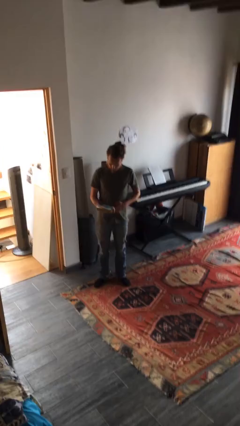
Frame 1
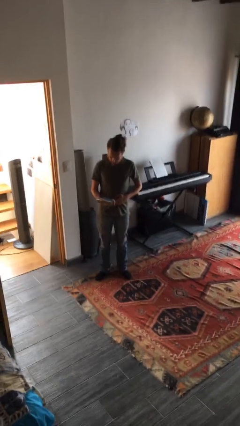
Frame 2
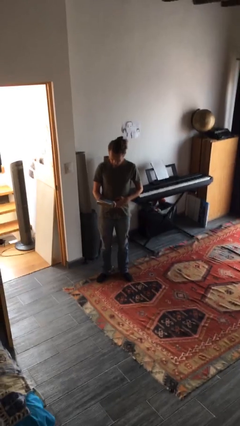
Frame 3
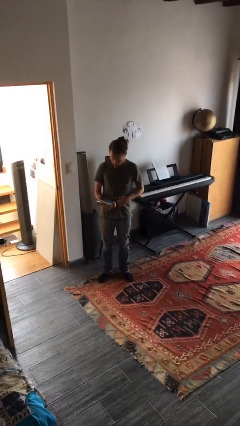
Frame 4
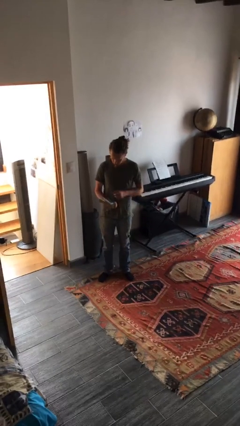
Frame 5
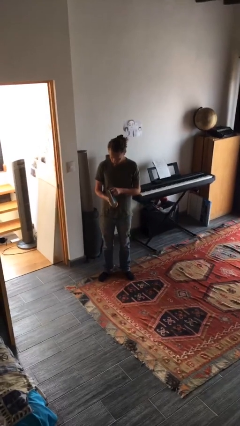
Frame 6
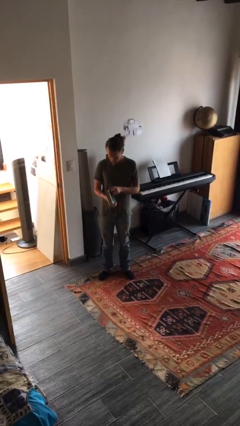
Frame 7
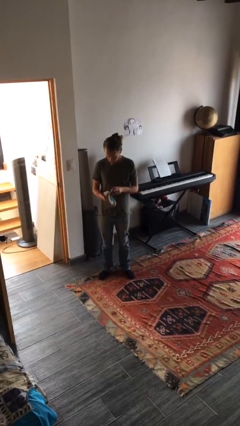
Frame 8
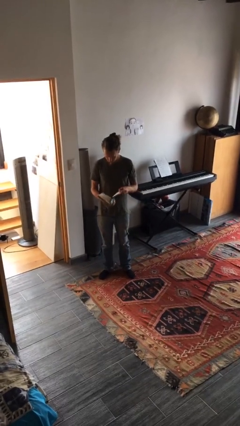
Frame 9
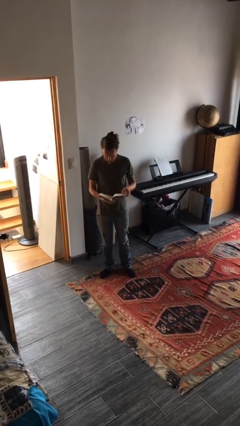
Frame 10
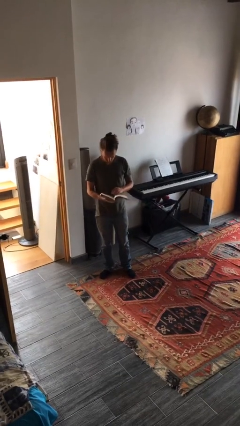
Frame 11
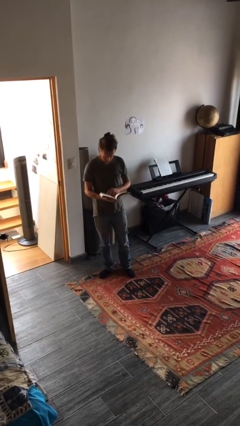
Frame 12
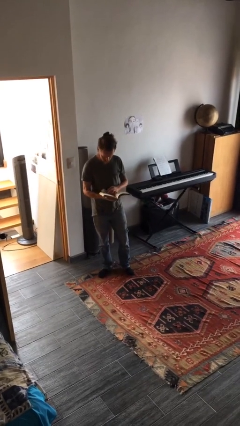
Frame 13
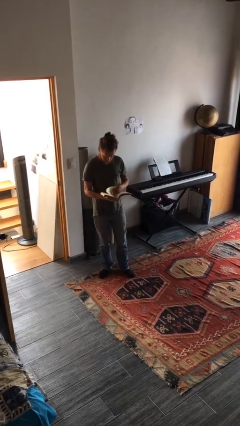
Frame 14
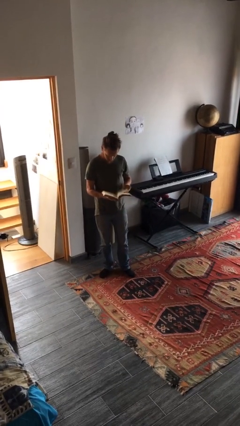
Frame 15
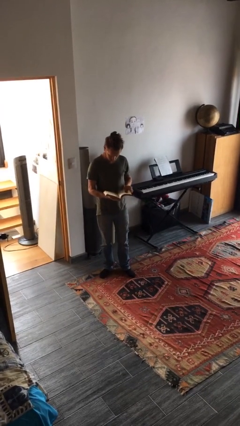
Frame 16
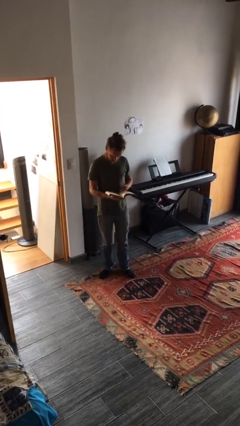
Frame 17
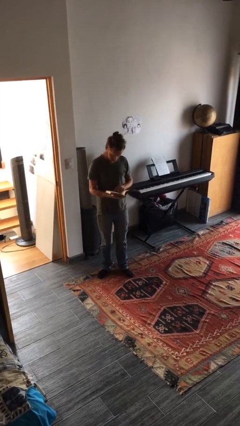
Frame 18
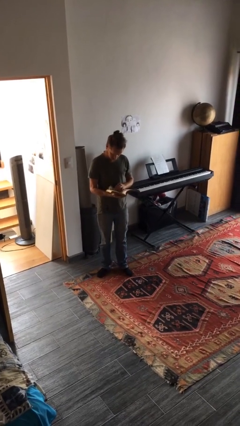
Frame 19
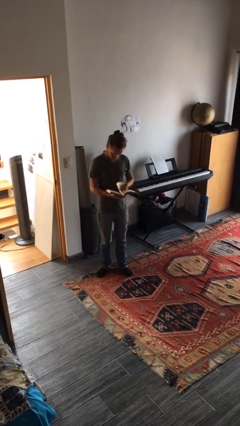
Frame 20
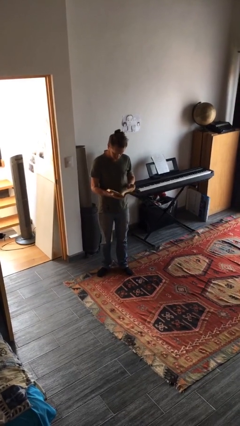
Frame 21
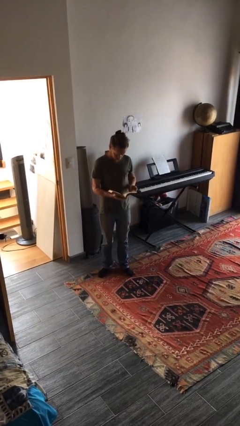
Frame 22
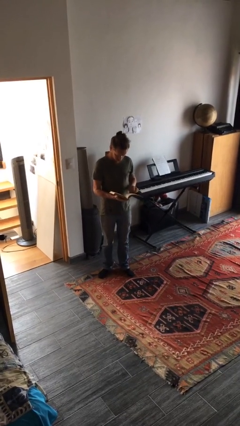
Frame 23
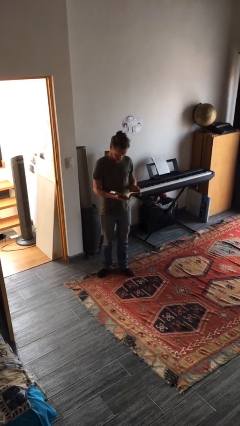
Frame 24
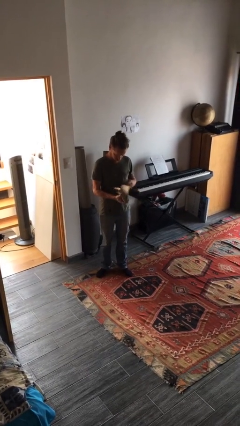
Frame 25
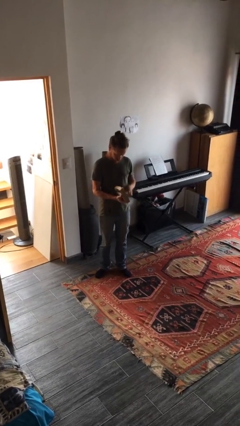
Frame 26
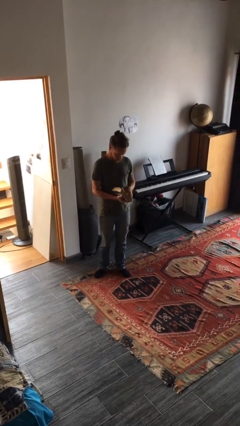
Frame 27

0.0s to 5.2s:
person reads book

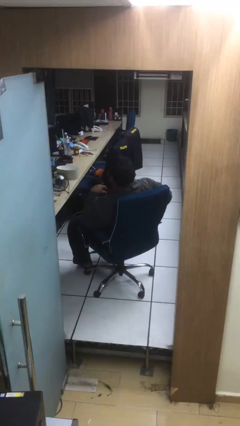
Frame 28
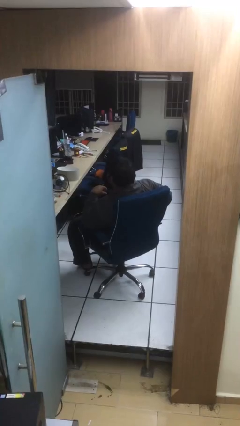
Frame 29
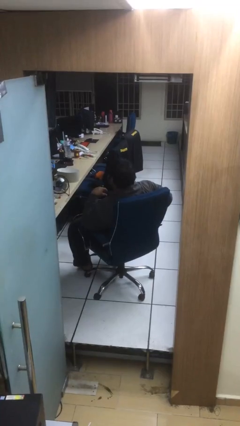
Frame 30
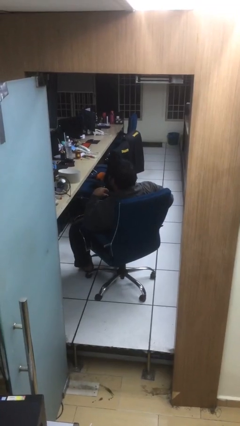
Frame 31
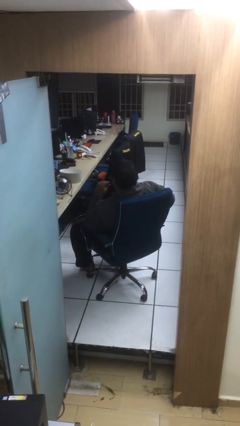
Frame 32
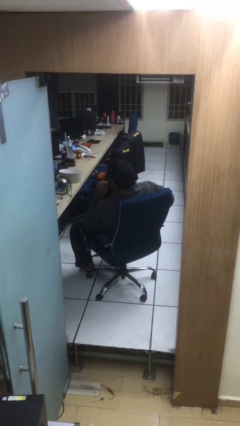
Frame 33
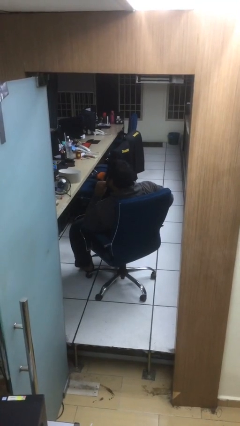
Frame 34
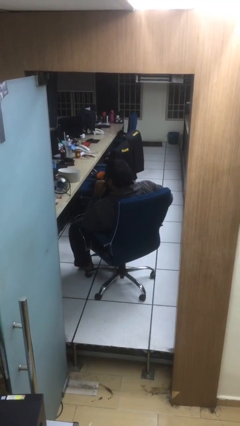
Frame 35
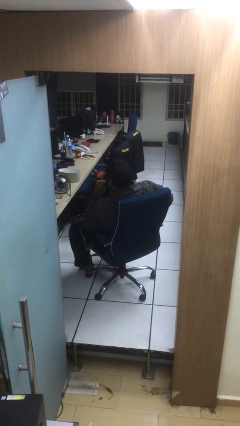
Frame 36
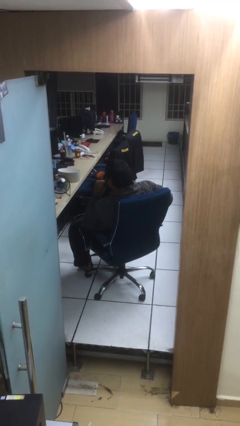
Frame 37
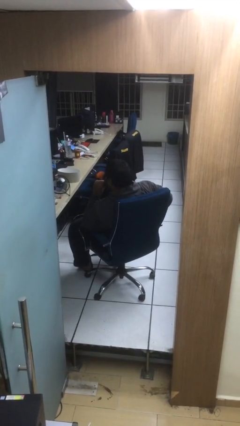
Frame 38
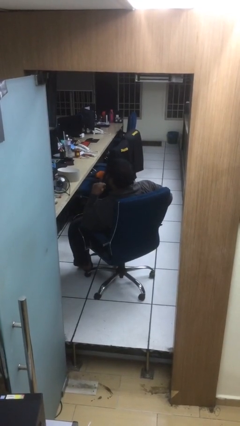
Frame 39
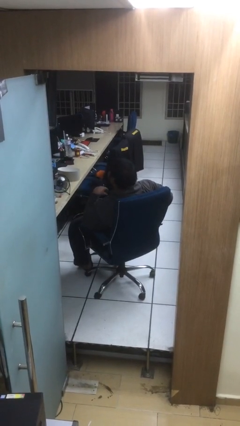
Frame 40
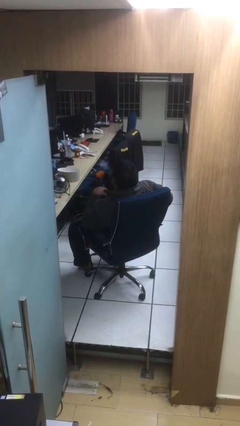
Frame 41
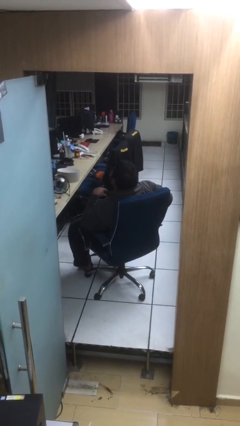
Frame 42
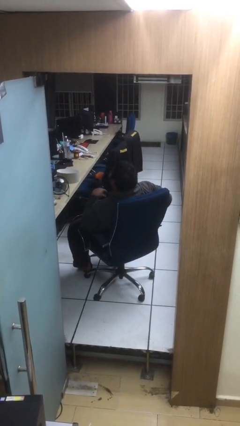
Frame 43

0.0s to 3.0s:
person vapes

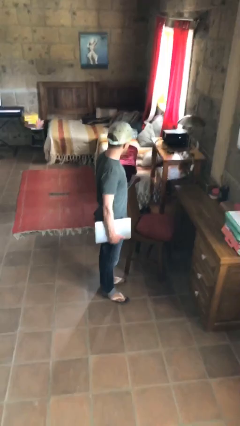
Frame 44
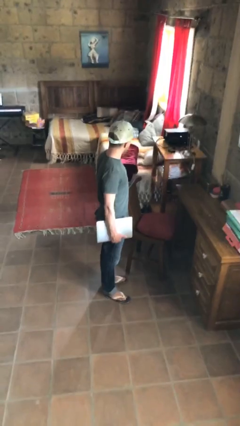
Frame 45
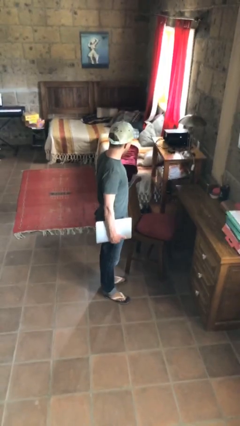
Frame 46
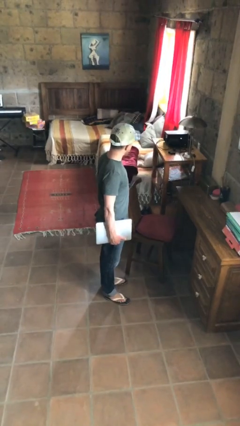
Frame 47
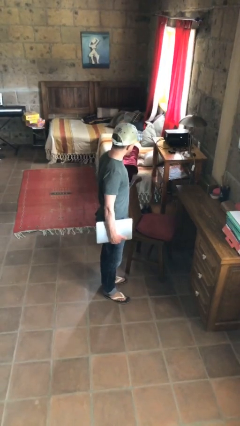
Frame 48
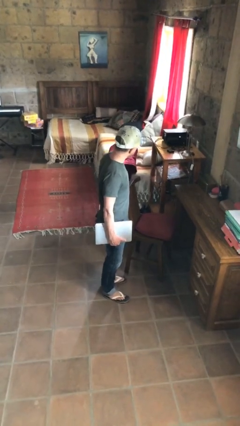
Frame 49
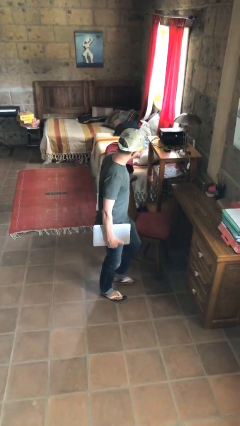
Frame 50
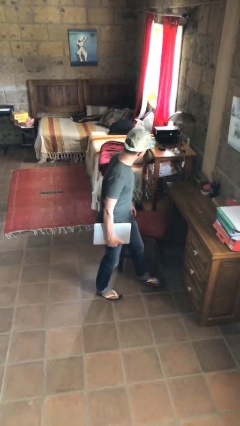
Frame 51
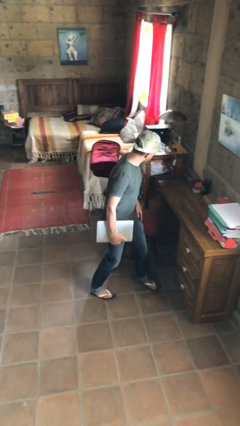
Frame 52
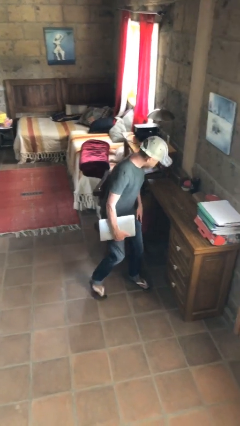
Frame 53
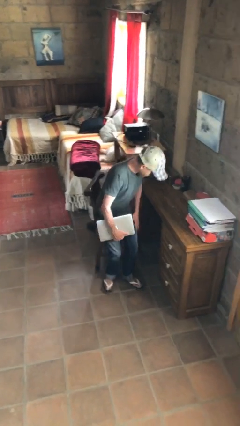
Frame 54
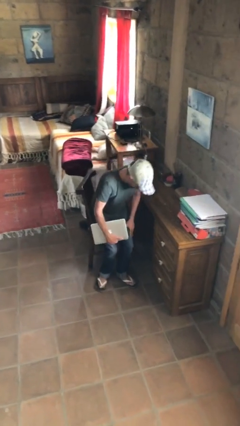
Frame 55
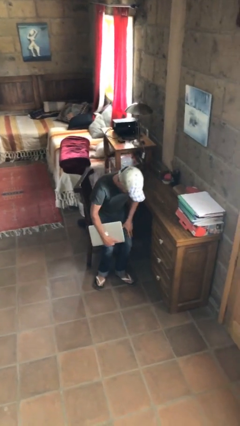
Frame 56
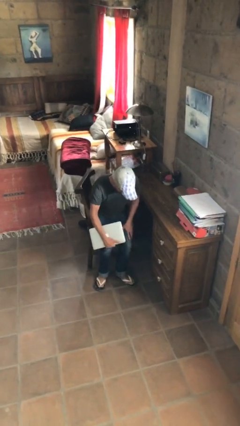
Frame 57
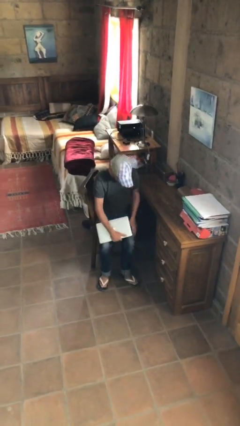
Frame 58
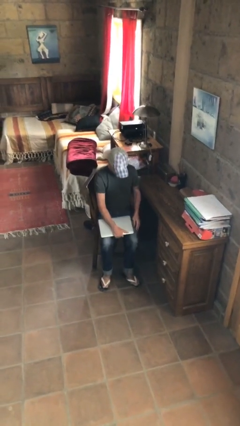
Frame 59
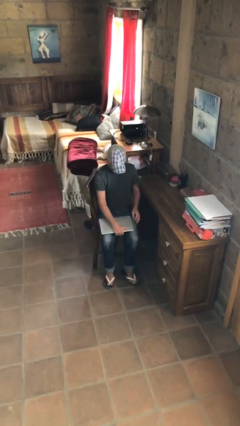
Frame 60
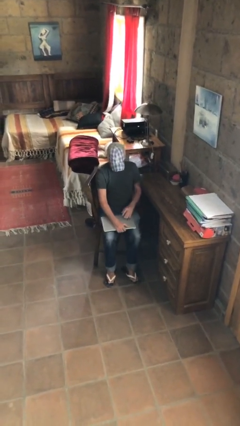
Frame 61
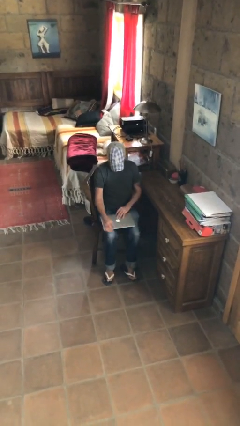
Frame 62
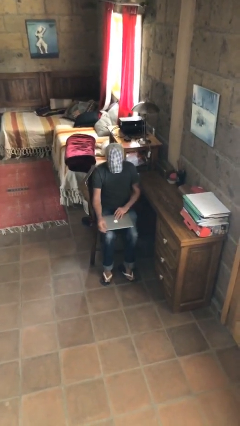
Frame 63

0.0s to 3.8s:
person sits down

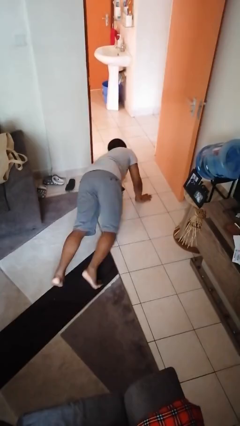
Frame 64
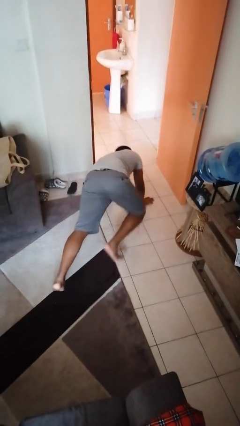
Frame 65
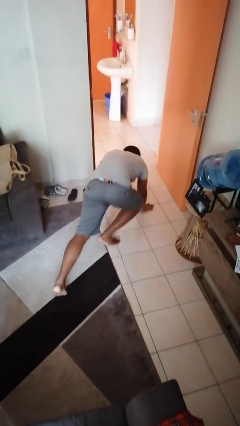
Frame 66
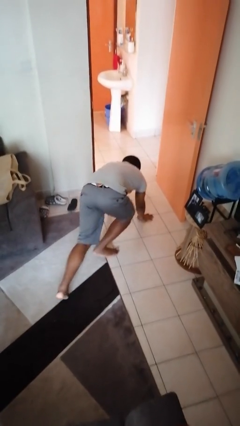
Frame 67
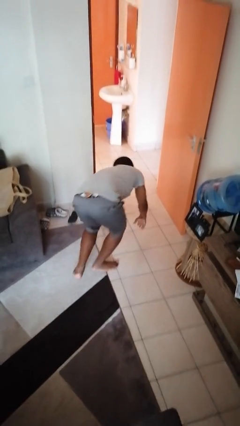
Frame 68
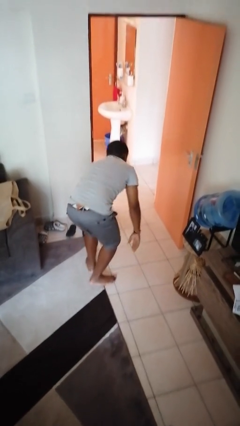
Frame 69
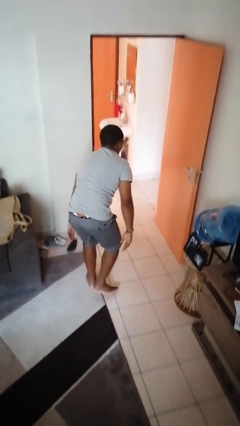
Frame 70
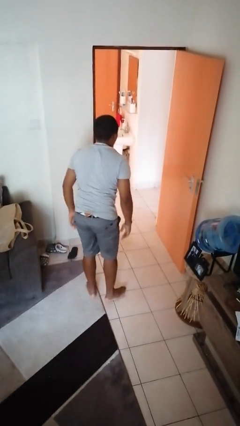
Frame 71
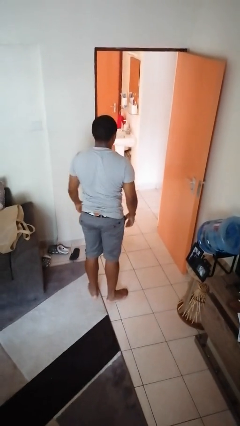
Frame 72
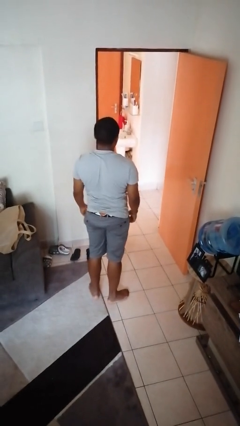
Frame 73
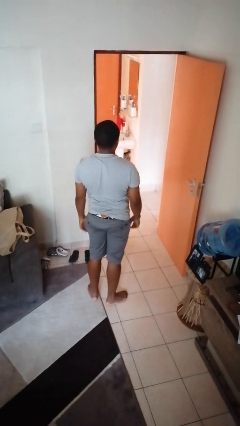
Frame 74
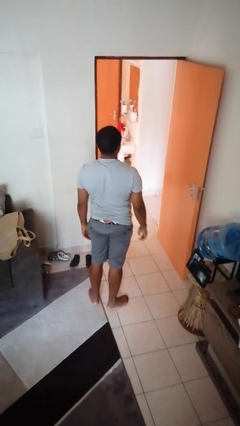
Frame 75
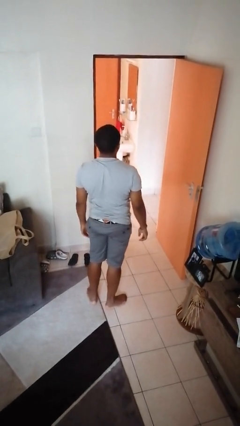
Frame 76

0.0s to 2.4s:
person stands up from floor

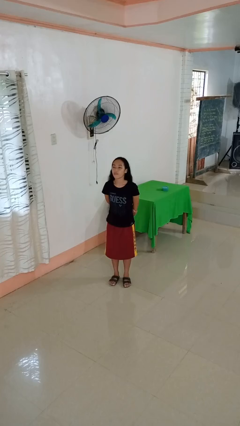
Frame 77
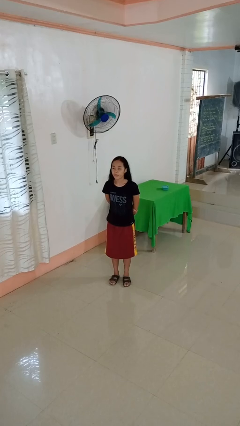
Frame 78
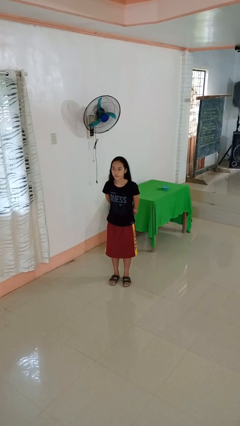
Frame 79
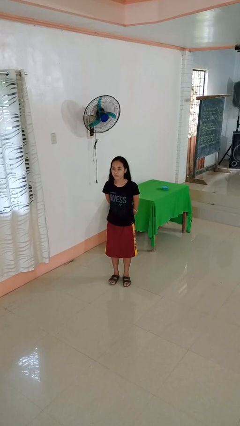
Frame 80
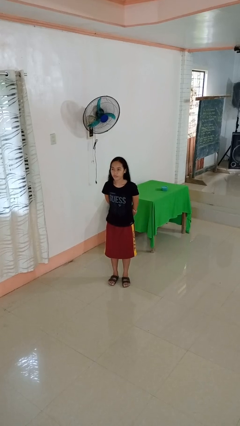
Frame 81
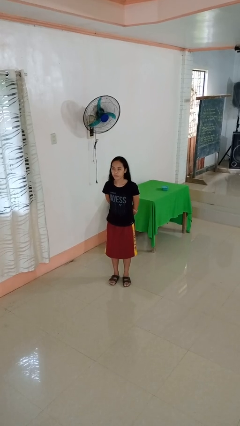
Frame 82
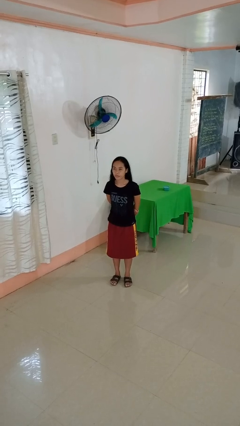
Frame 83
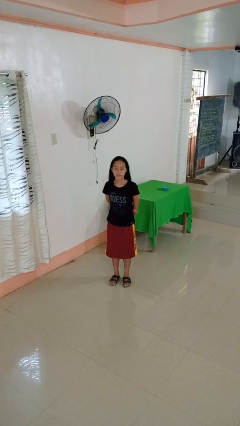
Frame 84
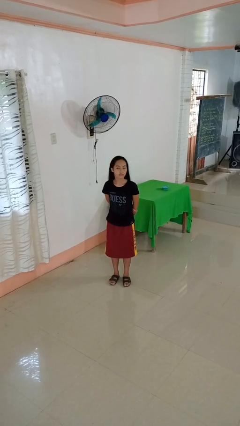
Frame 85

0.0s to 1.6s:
person nods head

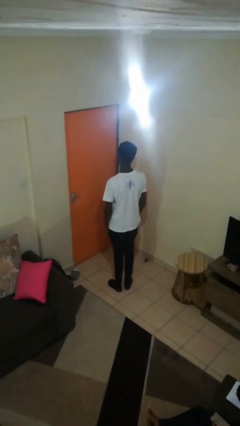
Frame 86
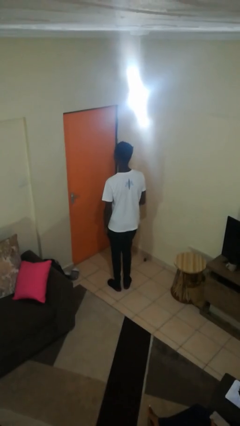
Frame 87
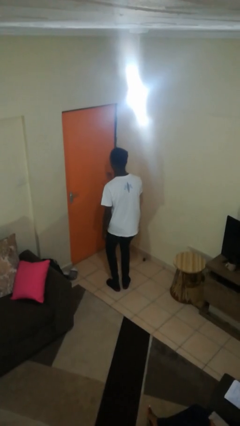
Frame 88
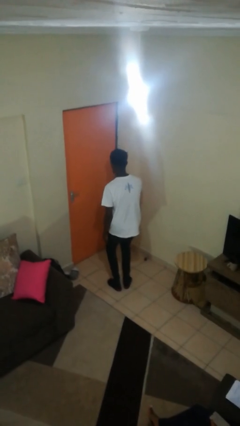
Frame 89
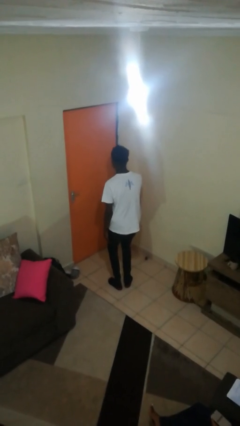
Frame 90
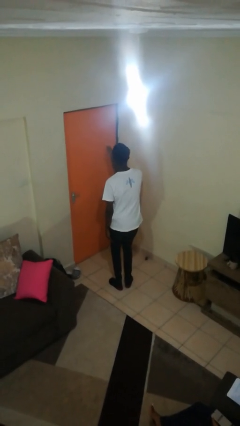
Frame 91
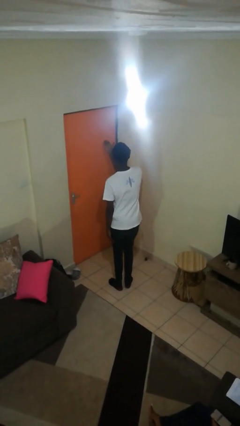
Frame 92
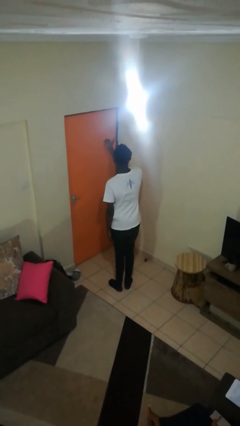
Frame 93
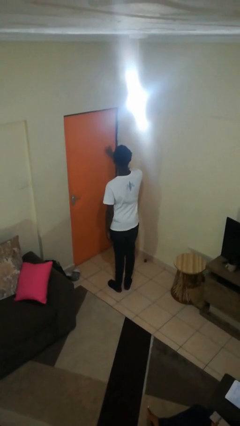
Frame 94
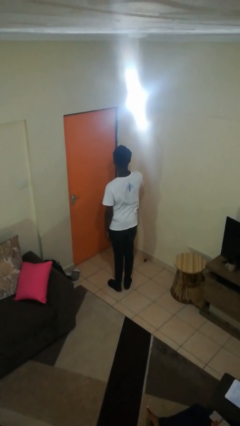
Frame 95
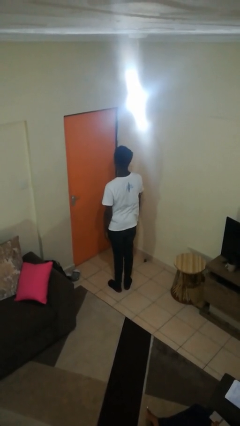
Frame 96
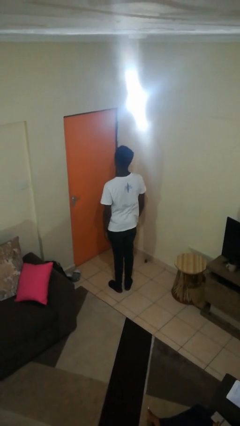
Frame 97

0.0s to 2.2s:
person gestures blow kiss
